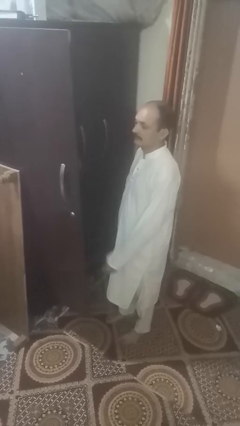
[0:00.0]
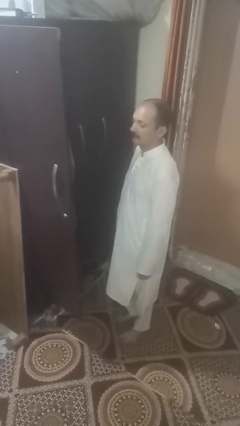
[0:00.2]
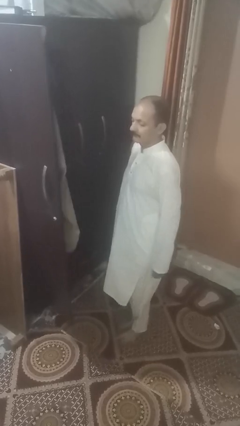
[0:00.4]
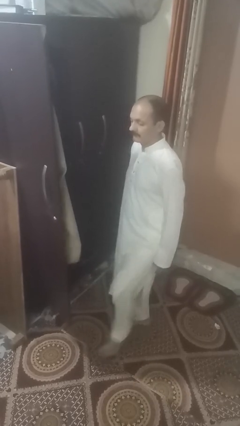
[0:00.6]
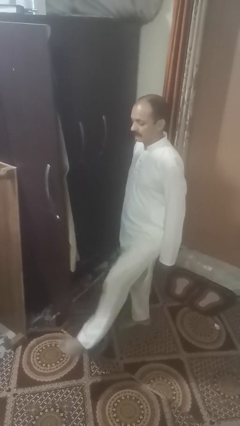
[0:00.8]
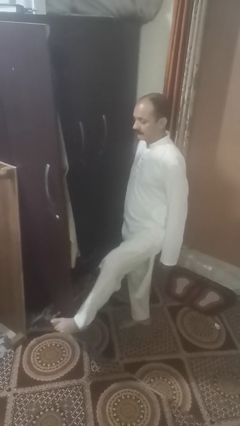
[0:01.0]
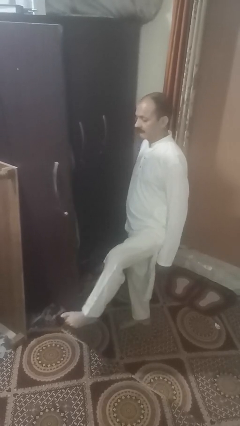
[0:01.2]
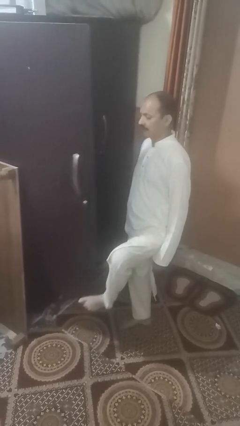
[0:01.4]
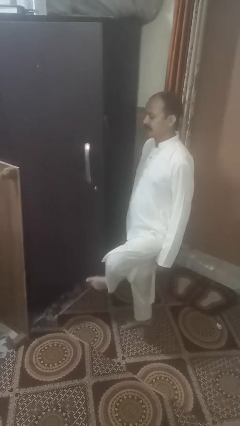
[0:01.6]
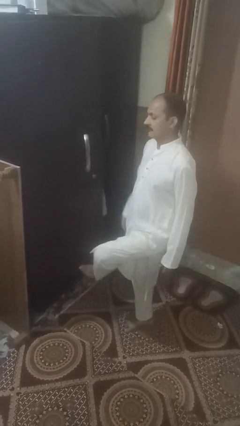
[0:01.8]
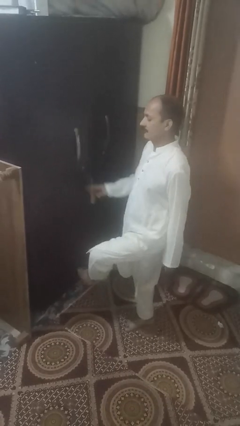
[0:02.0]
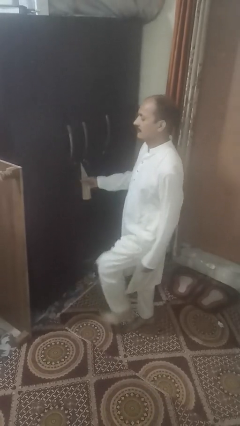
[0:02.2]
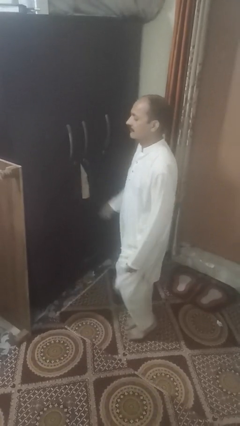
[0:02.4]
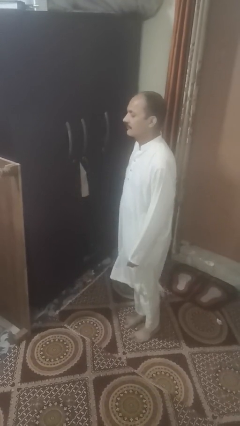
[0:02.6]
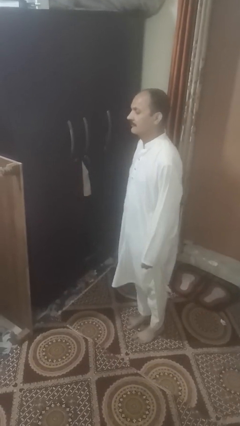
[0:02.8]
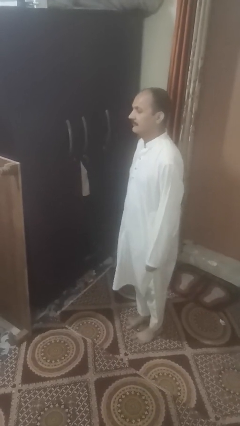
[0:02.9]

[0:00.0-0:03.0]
person closes door with foot

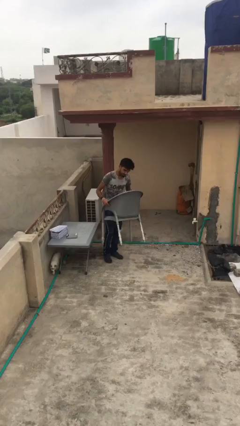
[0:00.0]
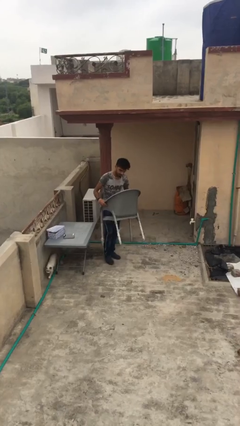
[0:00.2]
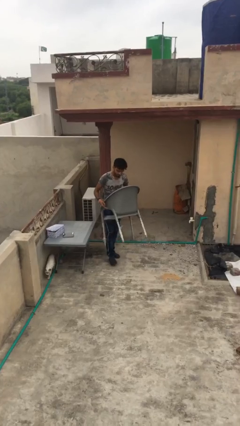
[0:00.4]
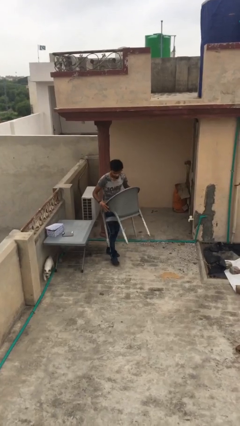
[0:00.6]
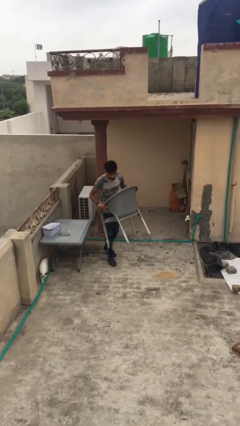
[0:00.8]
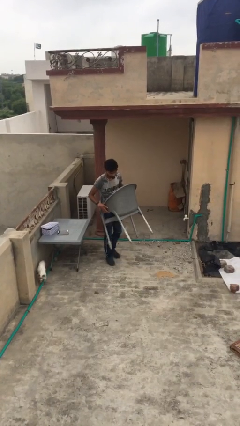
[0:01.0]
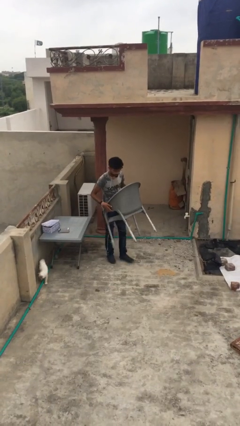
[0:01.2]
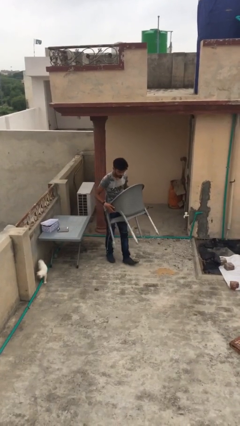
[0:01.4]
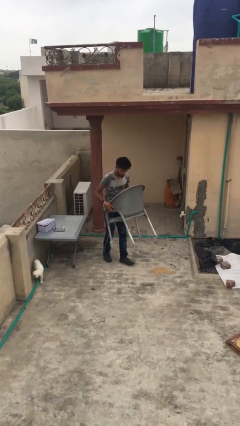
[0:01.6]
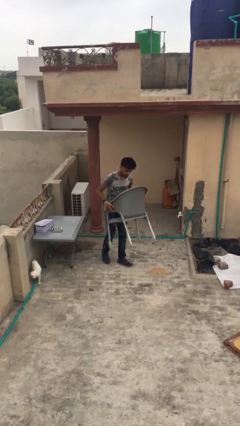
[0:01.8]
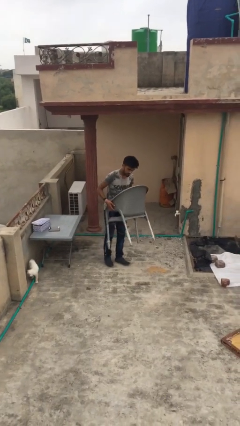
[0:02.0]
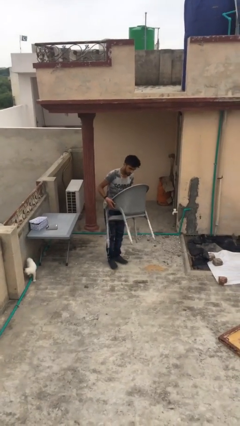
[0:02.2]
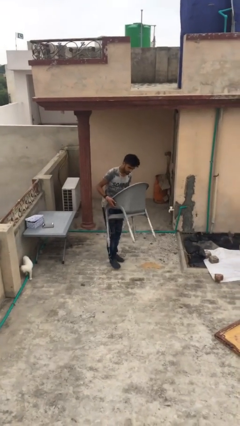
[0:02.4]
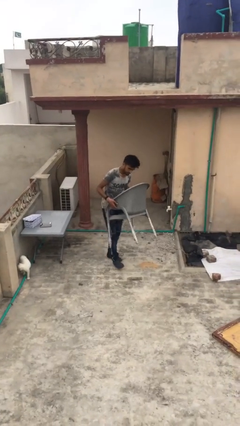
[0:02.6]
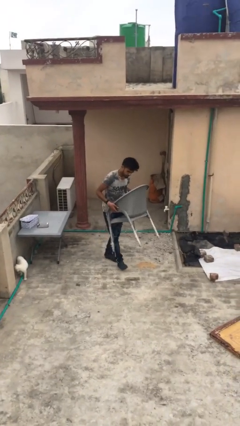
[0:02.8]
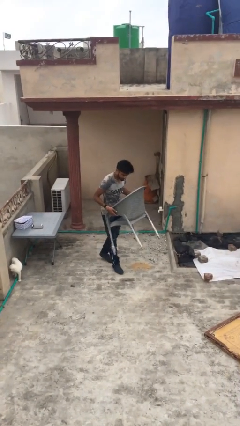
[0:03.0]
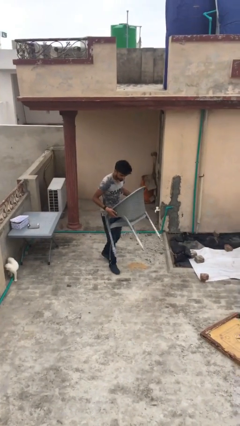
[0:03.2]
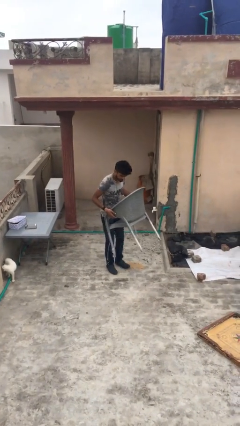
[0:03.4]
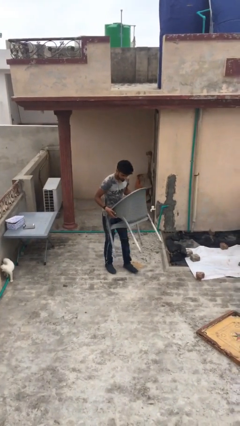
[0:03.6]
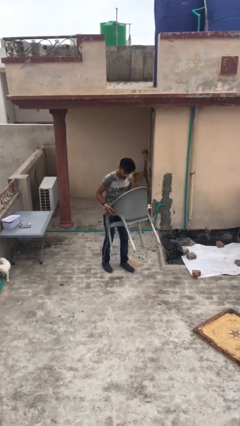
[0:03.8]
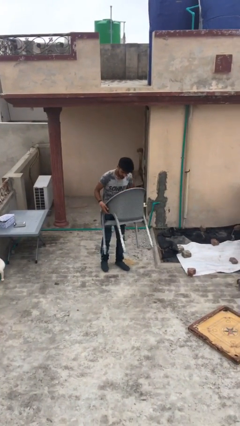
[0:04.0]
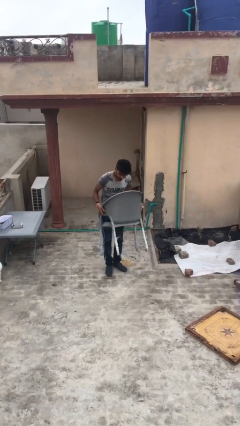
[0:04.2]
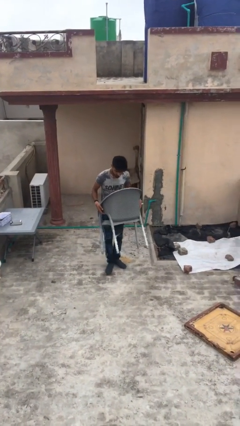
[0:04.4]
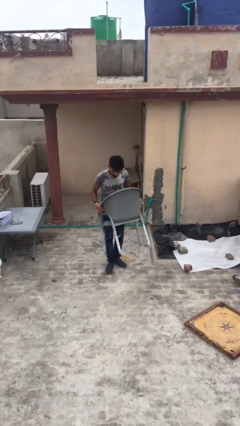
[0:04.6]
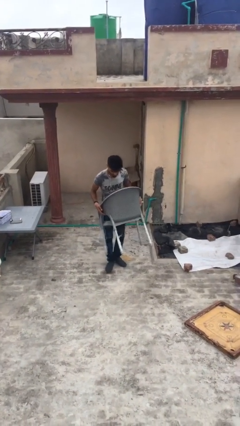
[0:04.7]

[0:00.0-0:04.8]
person carries heavy object

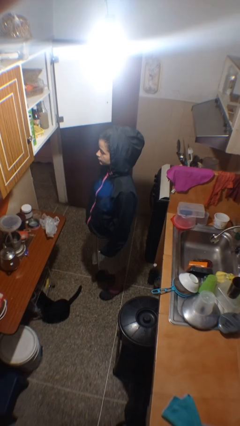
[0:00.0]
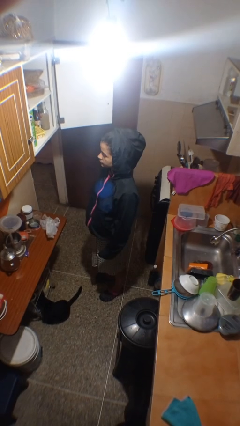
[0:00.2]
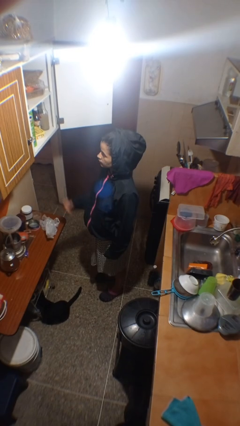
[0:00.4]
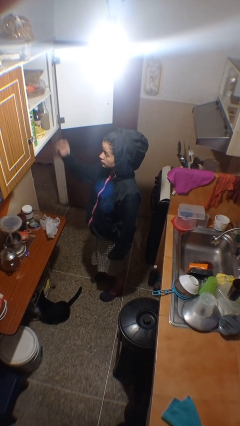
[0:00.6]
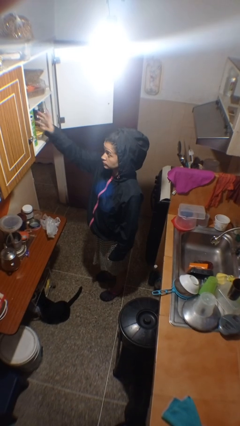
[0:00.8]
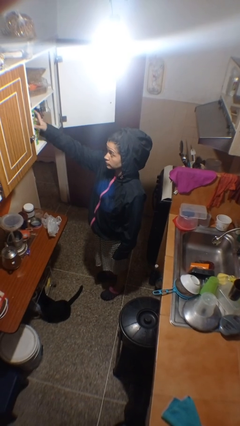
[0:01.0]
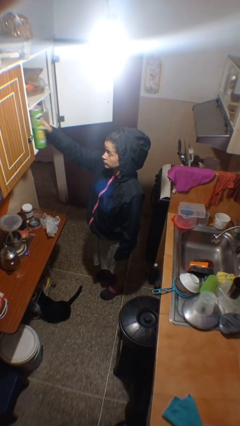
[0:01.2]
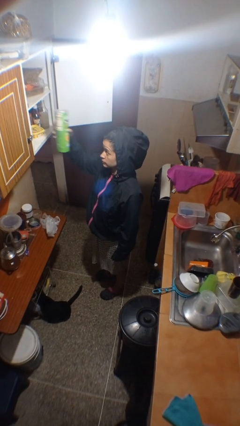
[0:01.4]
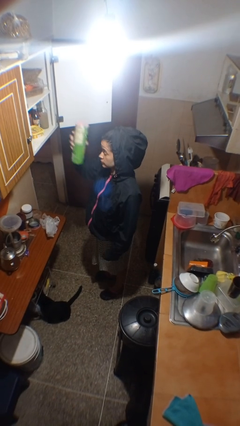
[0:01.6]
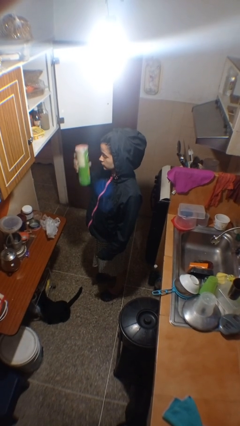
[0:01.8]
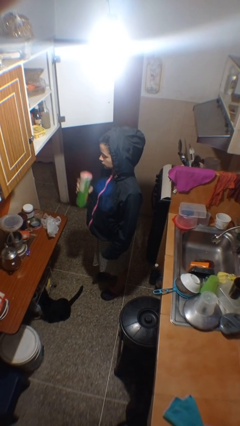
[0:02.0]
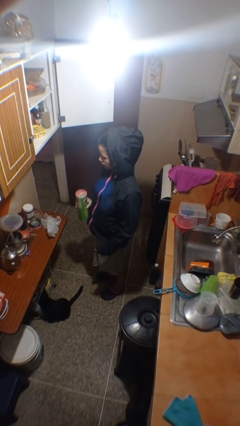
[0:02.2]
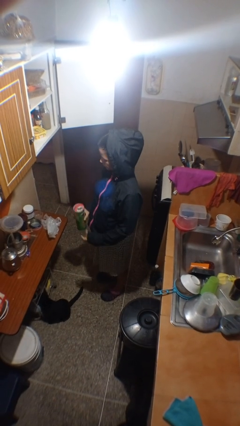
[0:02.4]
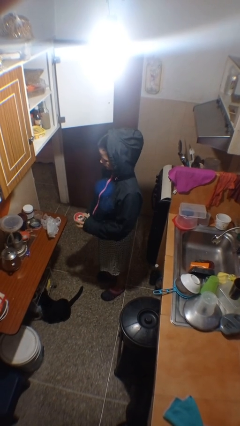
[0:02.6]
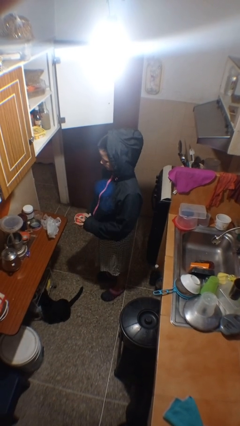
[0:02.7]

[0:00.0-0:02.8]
person takes object from cabinet

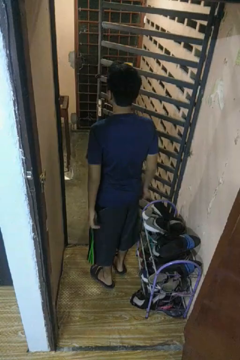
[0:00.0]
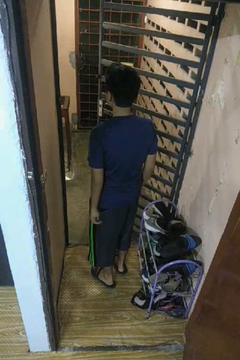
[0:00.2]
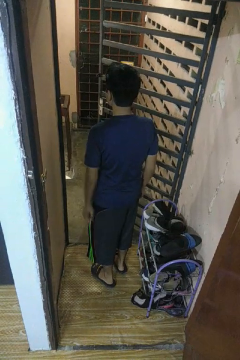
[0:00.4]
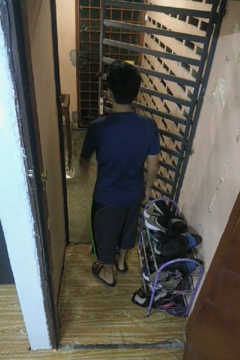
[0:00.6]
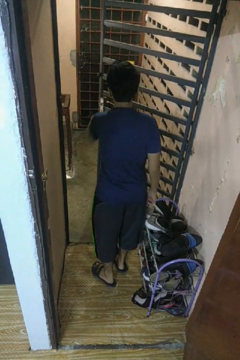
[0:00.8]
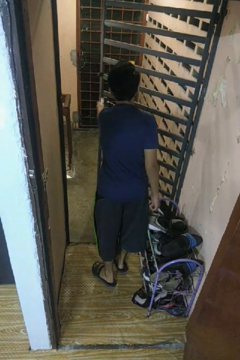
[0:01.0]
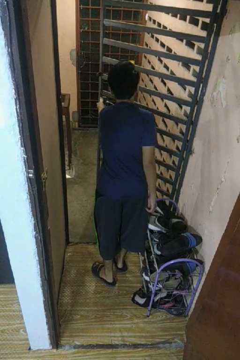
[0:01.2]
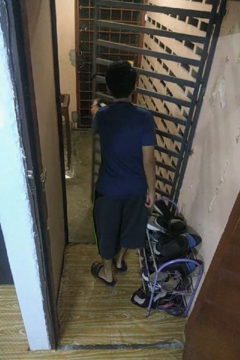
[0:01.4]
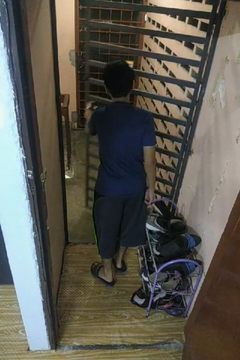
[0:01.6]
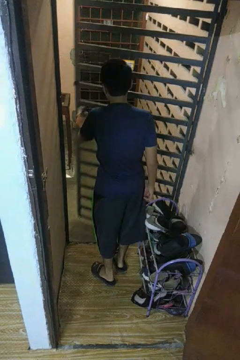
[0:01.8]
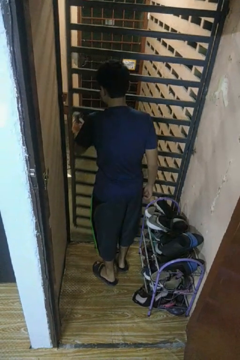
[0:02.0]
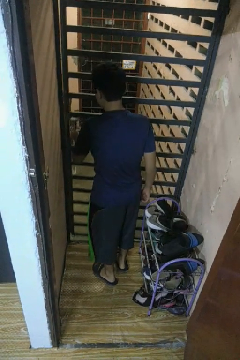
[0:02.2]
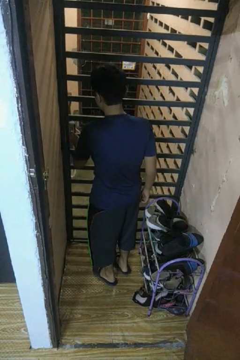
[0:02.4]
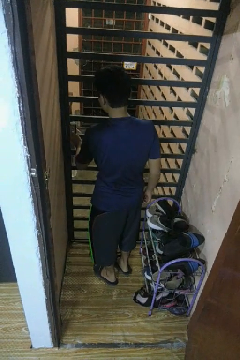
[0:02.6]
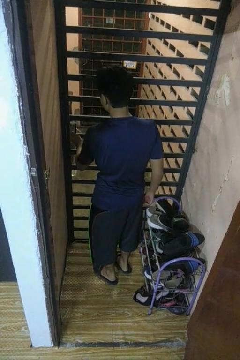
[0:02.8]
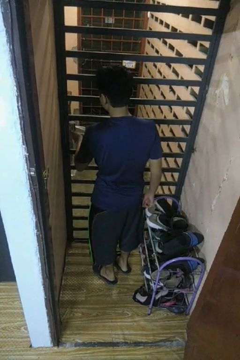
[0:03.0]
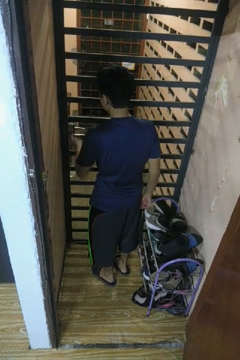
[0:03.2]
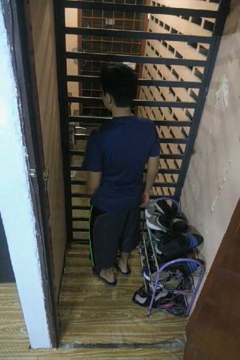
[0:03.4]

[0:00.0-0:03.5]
person closes gate

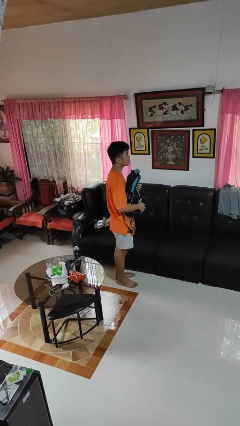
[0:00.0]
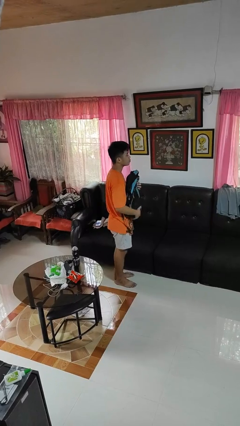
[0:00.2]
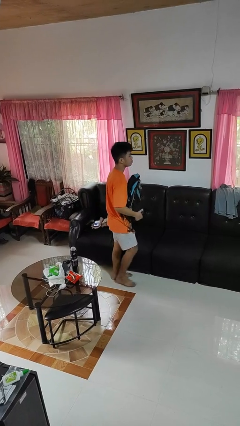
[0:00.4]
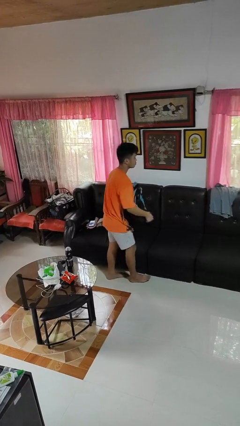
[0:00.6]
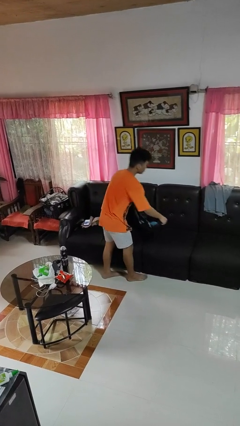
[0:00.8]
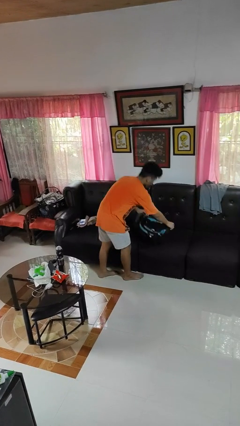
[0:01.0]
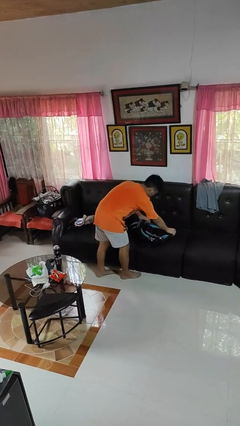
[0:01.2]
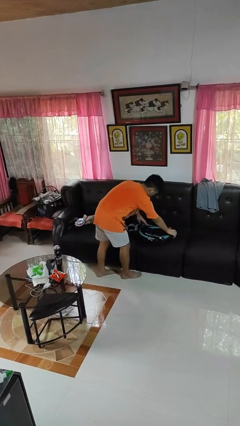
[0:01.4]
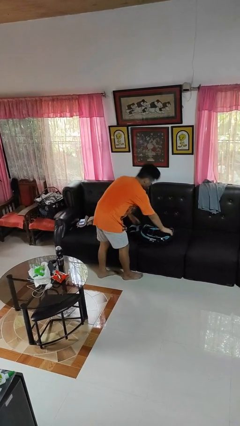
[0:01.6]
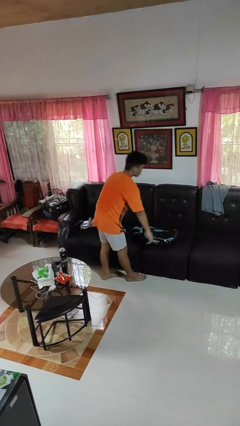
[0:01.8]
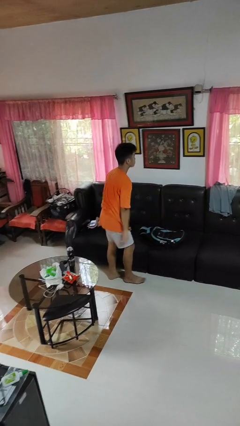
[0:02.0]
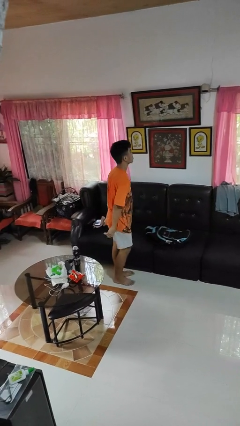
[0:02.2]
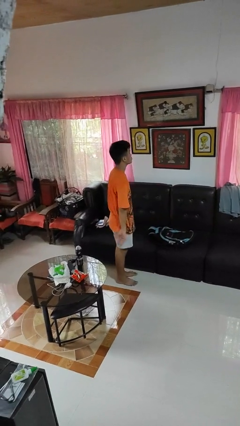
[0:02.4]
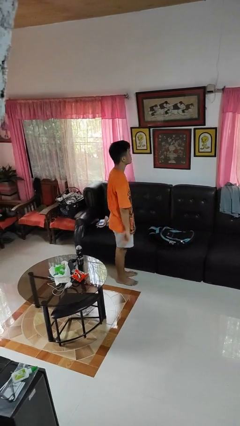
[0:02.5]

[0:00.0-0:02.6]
person puts down object on couch

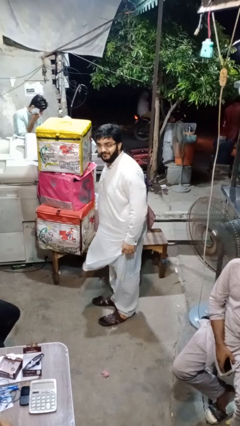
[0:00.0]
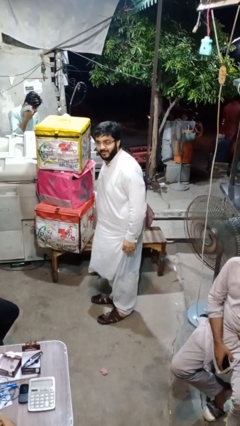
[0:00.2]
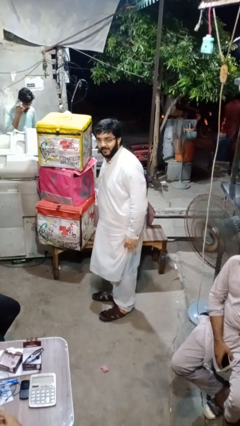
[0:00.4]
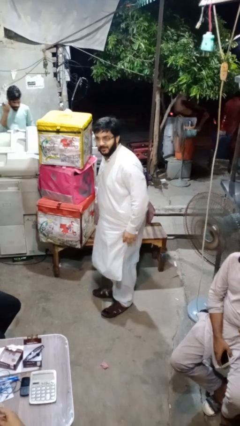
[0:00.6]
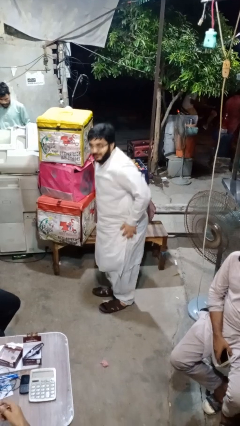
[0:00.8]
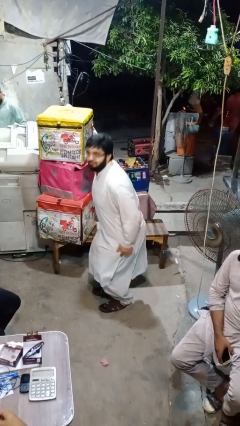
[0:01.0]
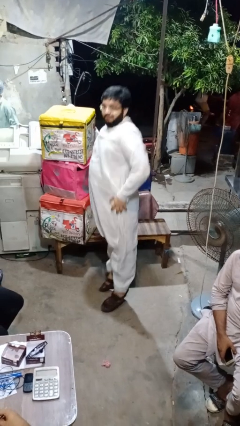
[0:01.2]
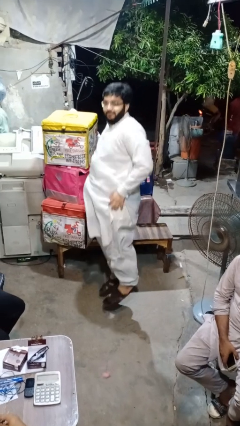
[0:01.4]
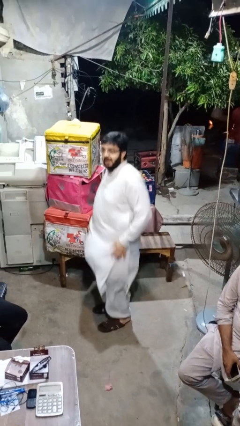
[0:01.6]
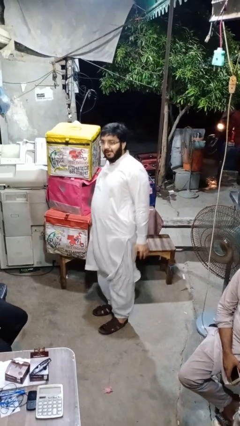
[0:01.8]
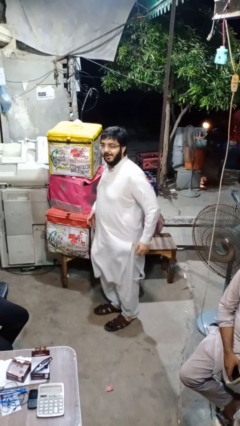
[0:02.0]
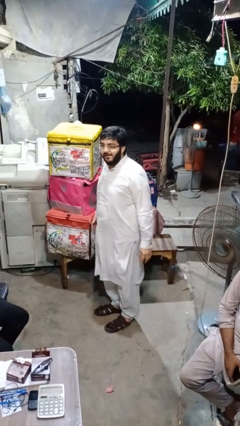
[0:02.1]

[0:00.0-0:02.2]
person jumps
